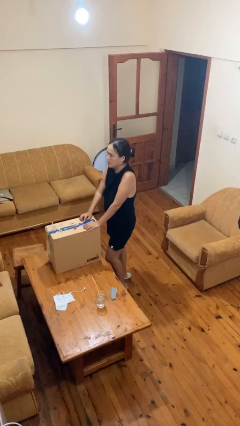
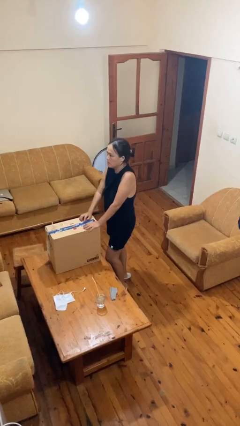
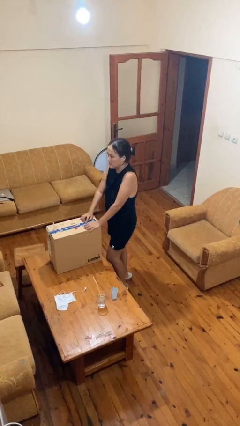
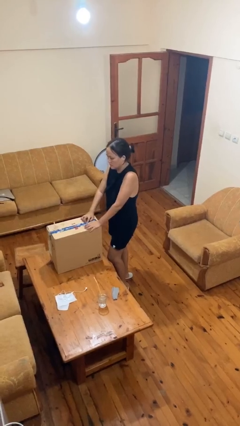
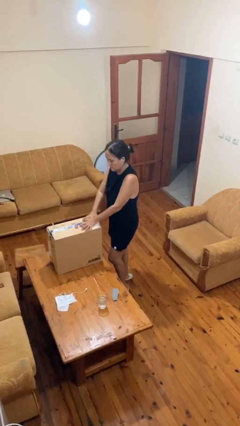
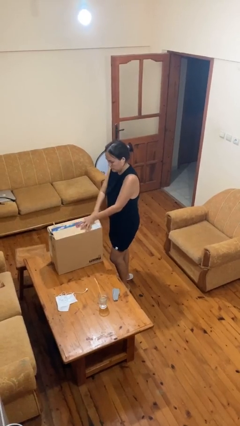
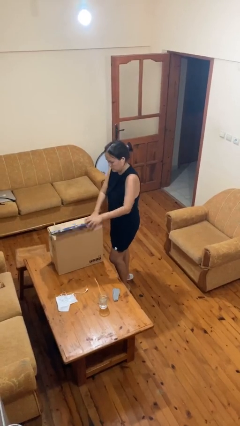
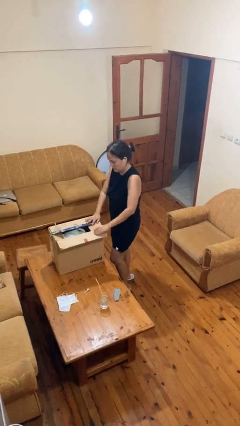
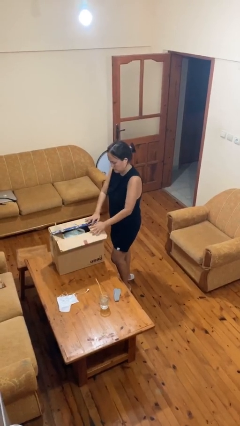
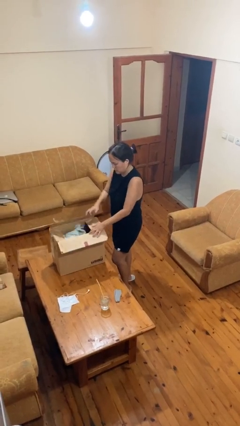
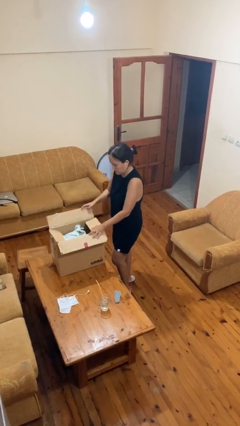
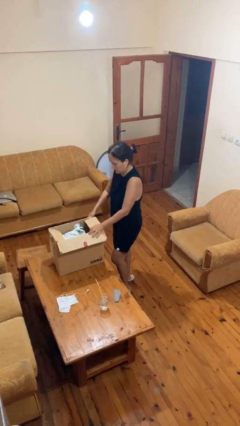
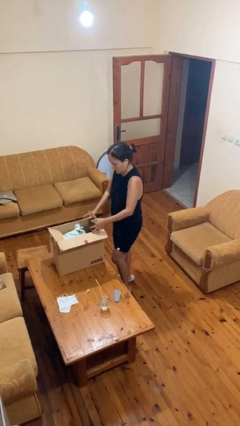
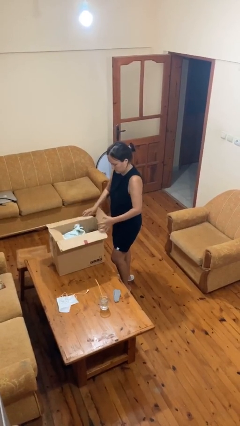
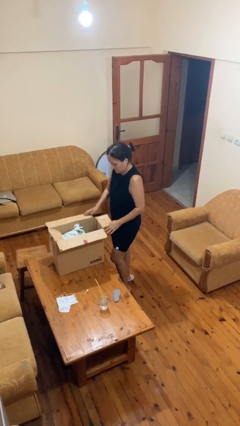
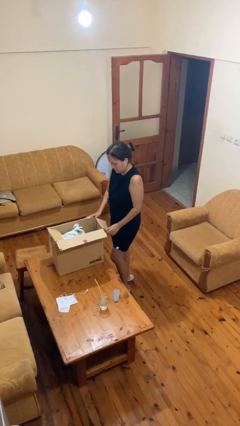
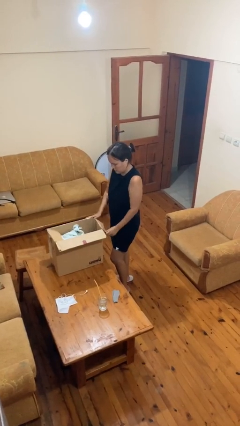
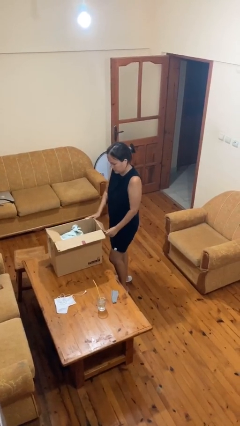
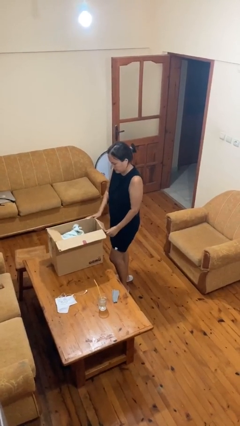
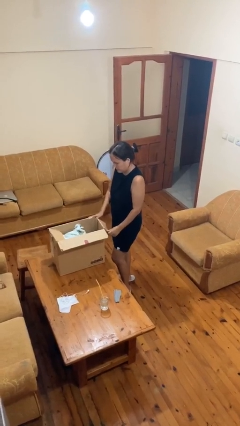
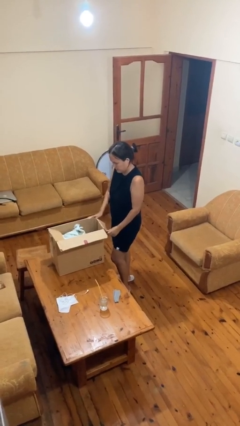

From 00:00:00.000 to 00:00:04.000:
person opens box

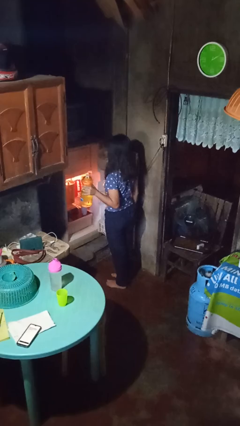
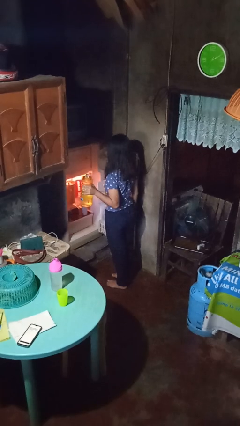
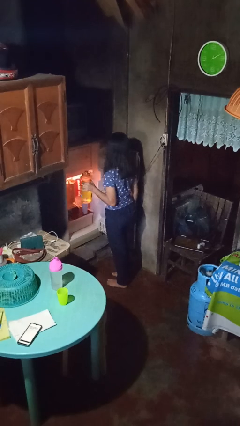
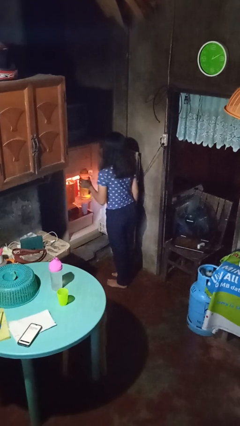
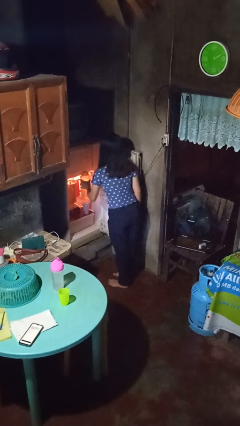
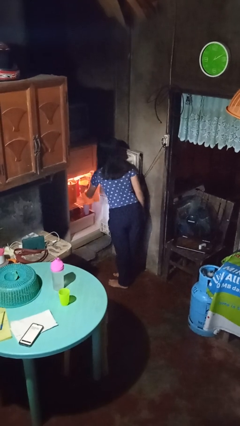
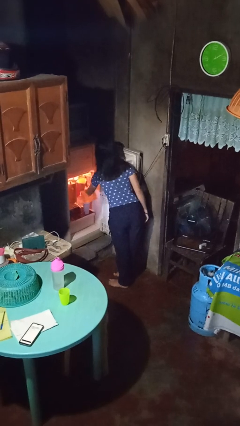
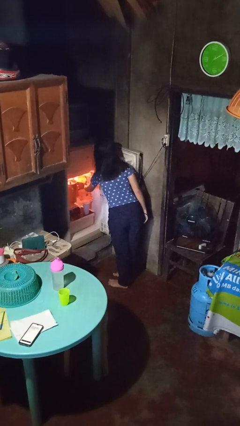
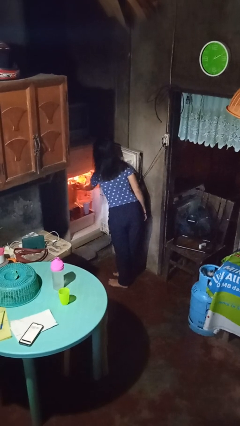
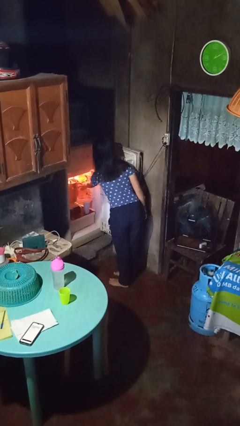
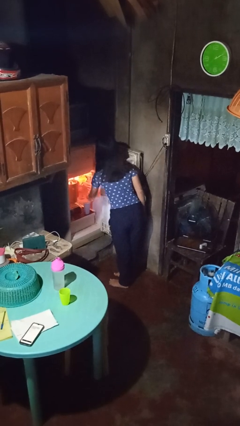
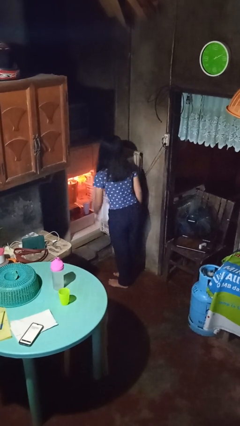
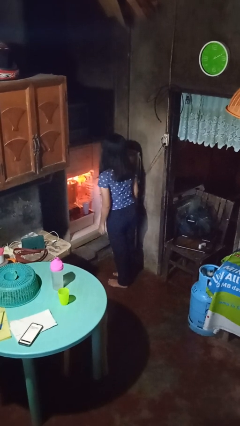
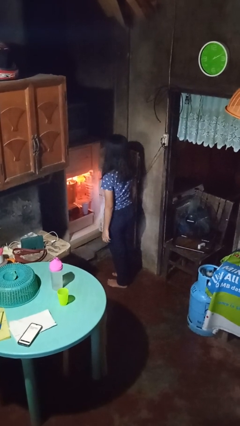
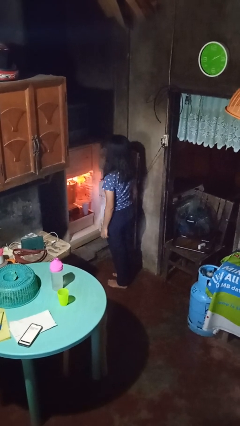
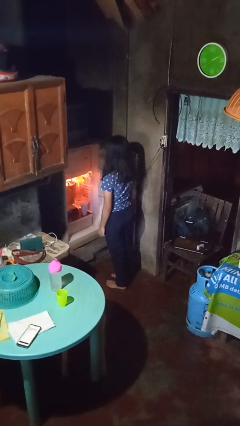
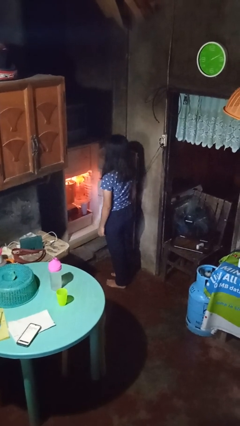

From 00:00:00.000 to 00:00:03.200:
person puts object into refrigerator

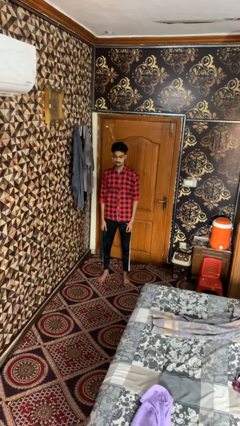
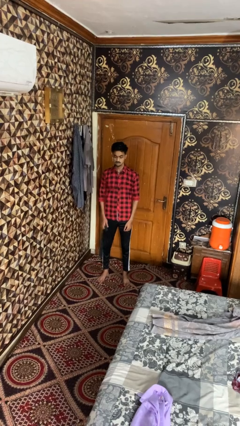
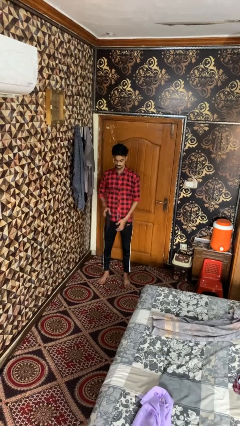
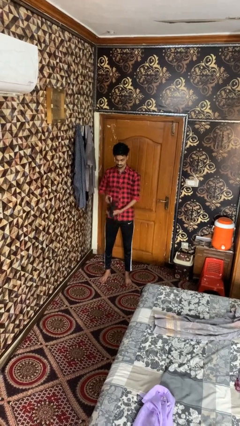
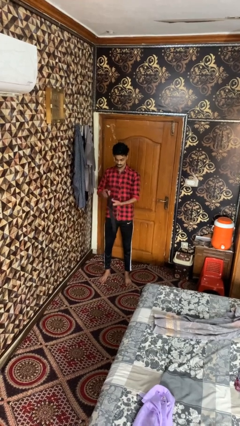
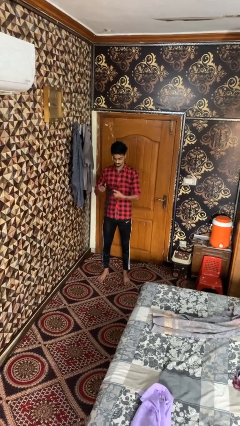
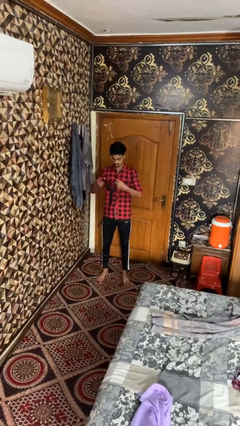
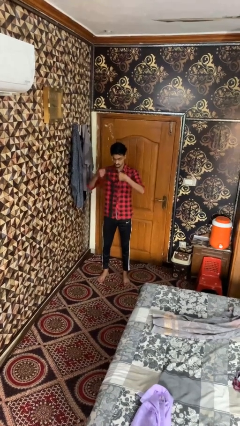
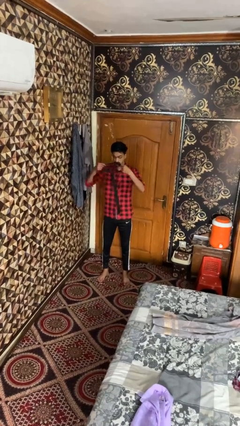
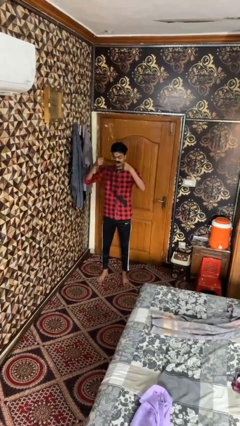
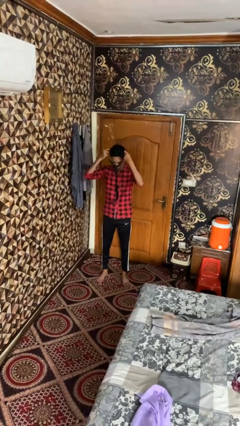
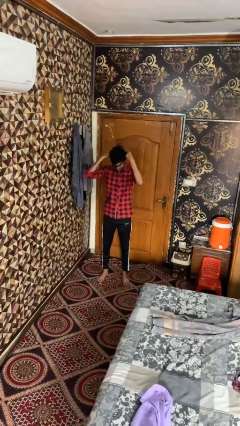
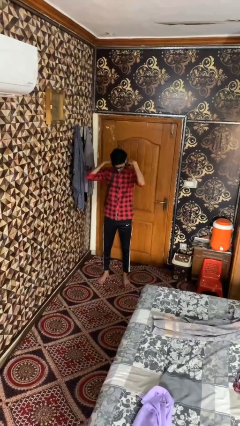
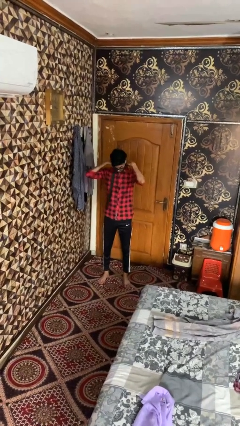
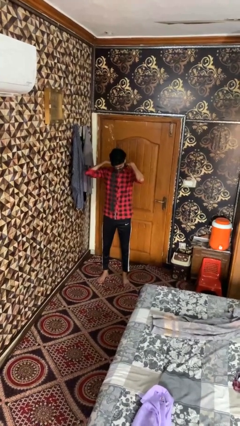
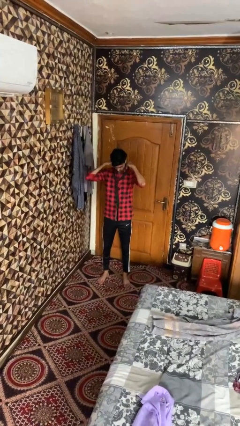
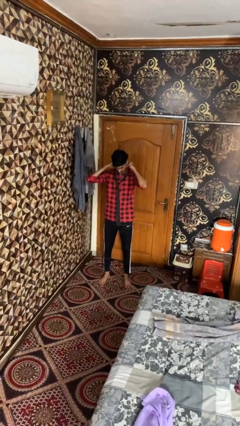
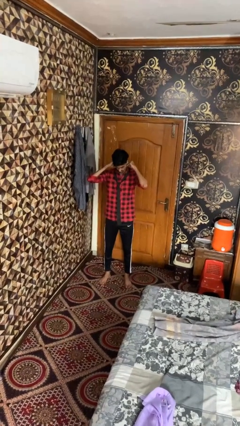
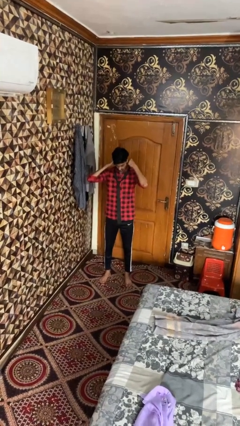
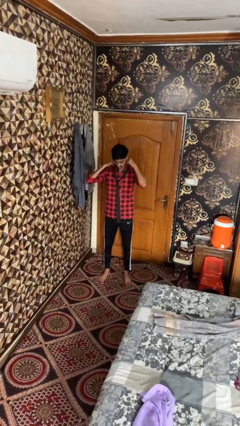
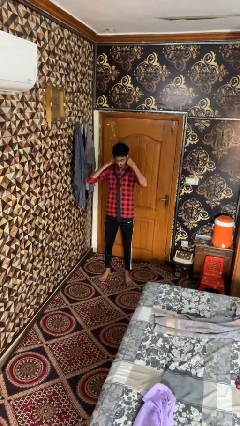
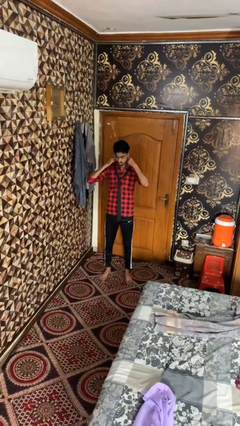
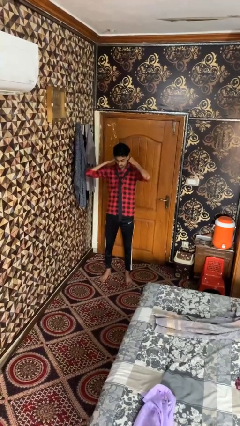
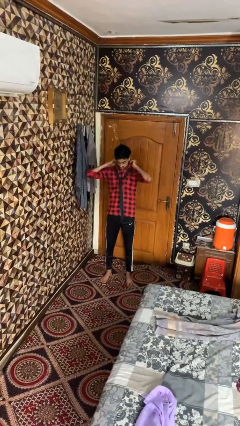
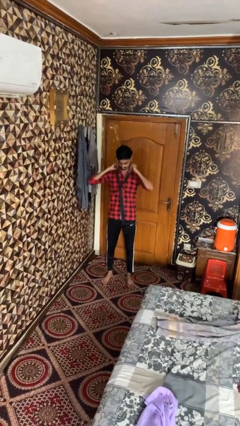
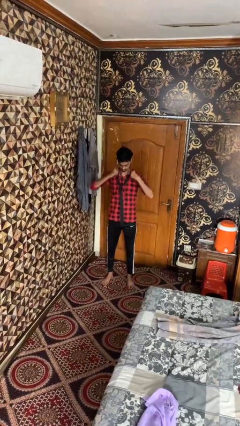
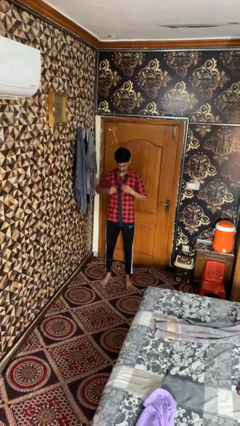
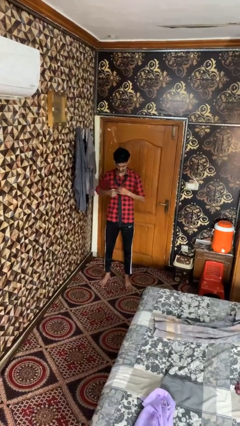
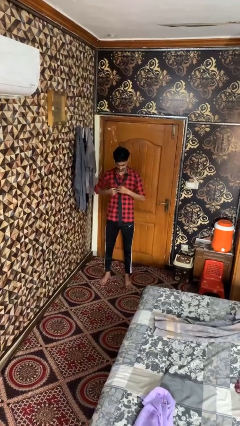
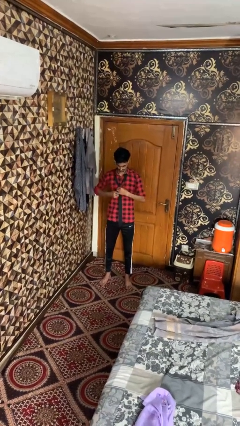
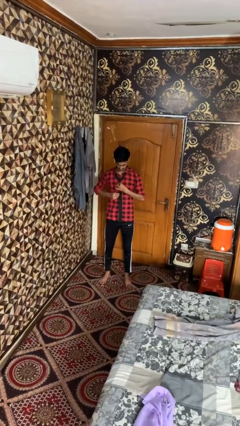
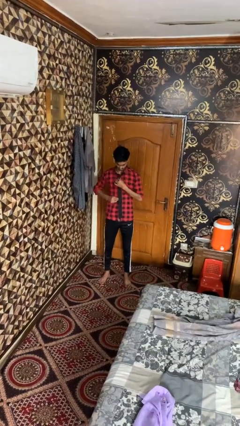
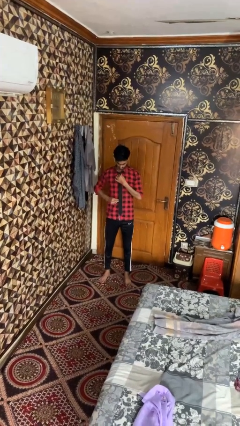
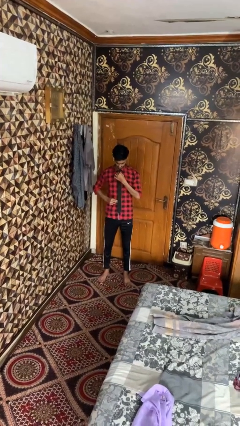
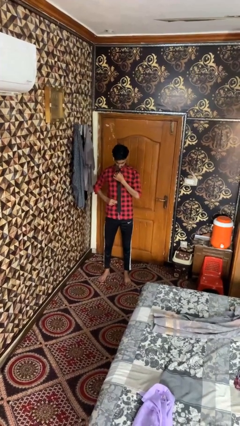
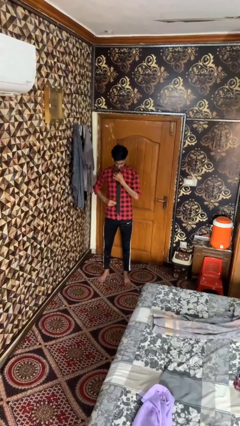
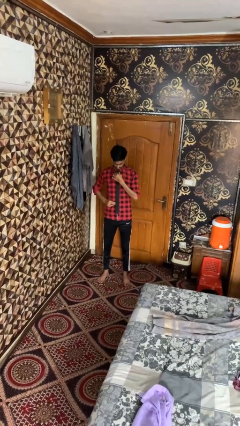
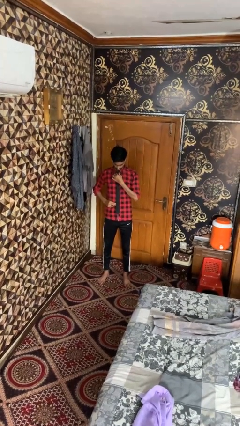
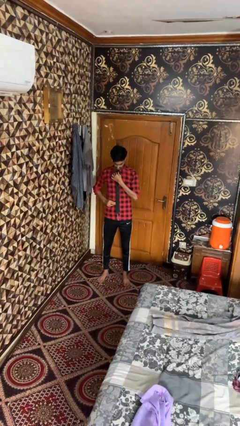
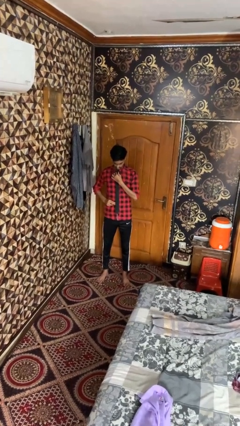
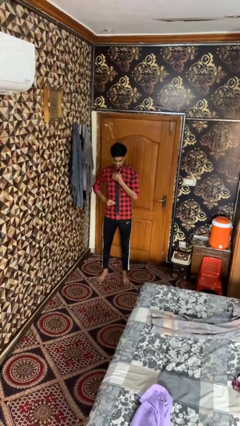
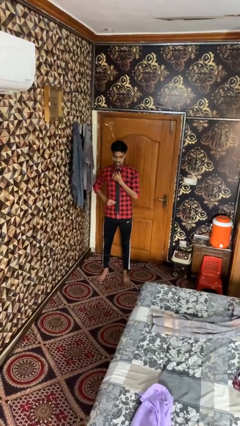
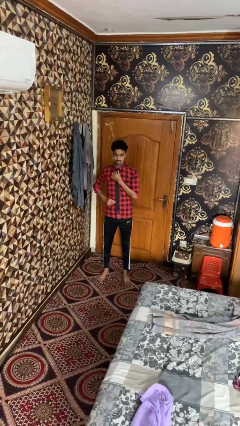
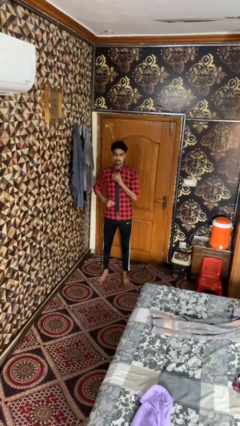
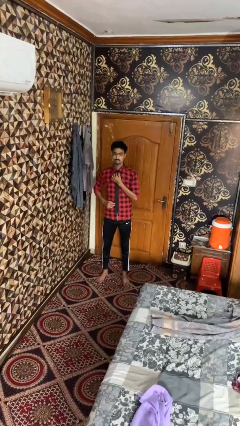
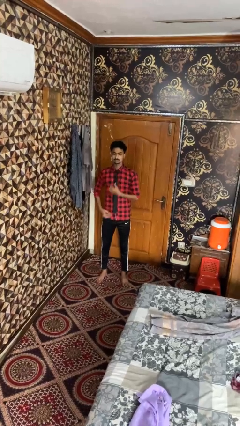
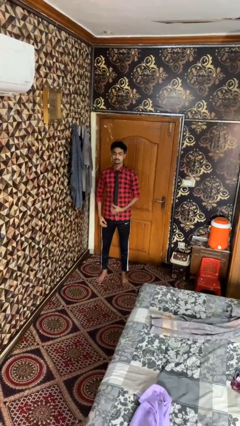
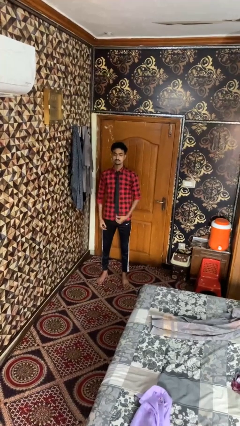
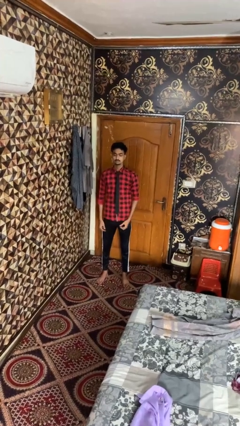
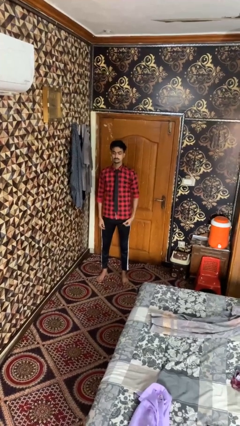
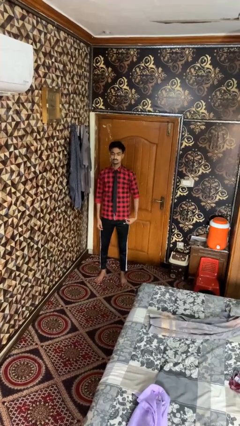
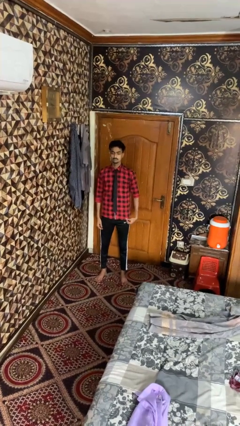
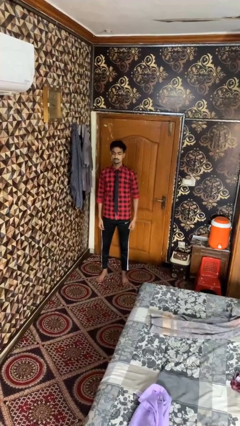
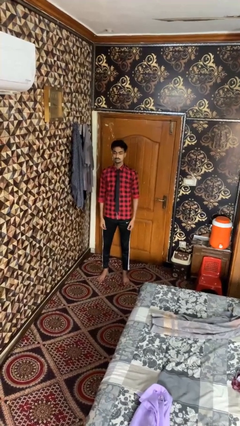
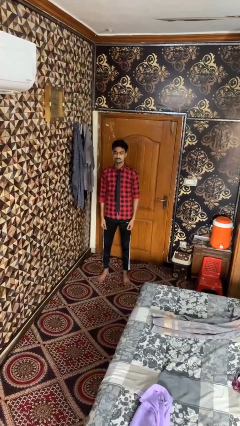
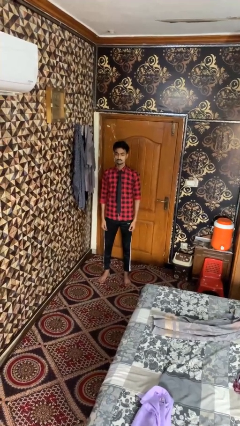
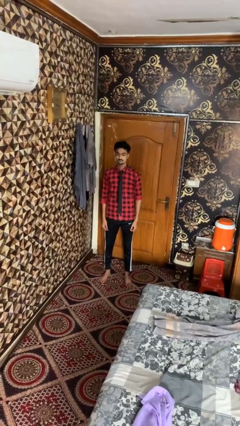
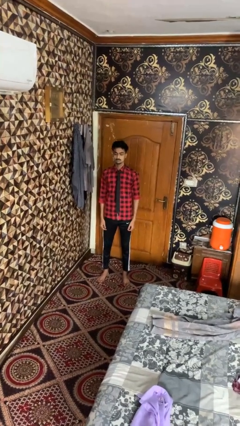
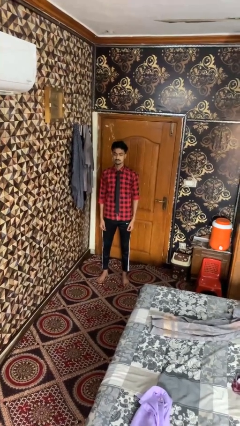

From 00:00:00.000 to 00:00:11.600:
person puts on necktie
